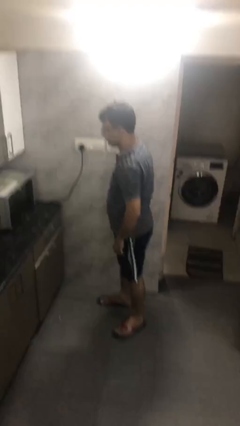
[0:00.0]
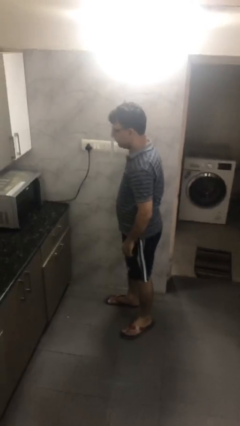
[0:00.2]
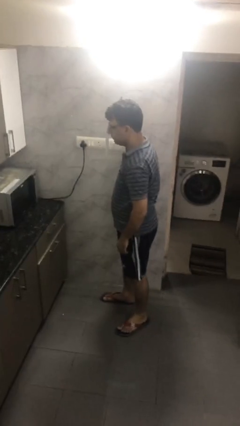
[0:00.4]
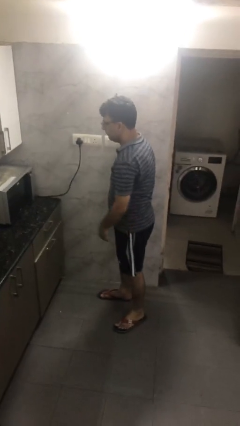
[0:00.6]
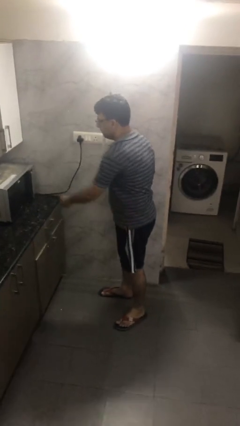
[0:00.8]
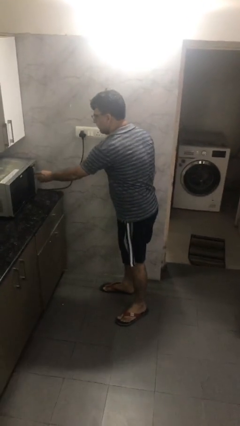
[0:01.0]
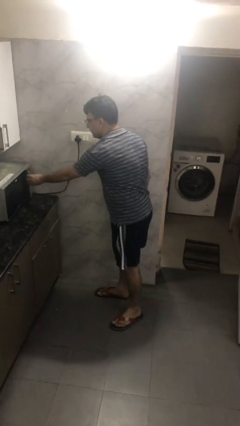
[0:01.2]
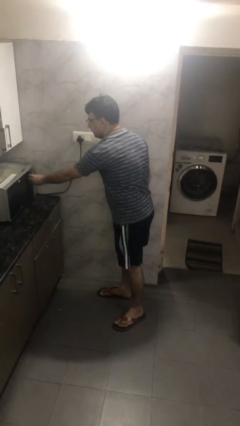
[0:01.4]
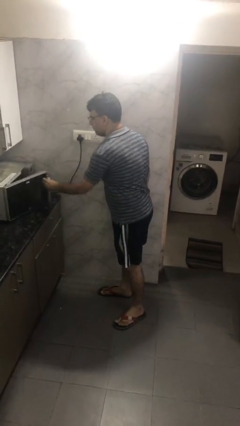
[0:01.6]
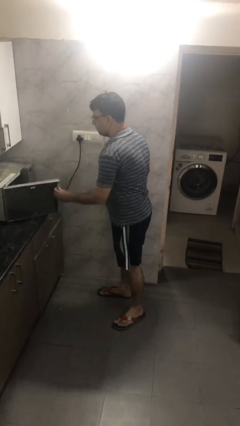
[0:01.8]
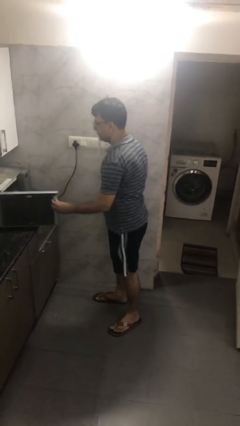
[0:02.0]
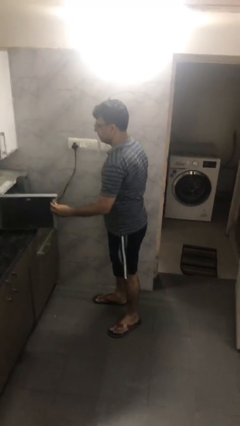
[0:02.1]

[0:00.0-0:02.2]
person opens microwave

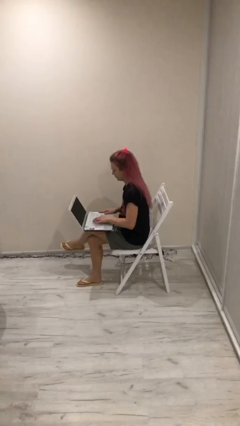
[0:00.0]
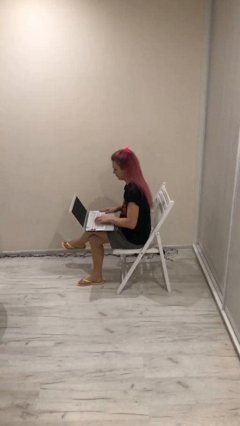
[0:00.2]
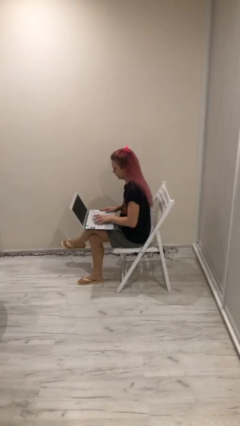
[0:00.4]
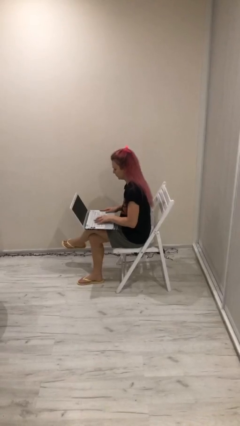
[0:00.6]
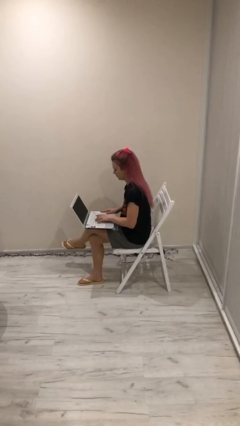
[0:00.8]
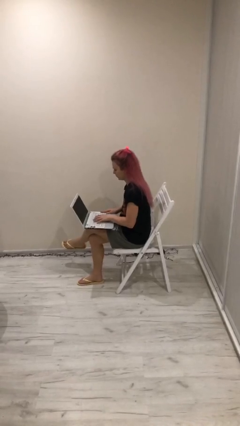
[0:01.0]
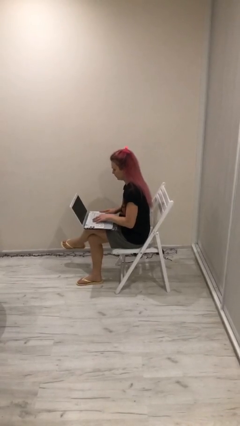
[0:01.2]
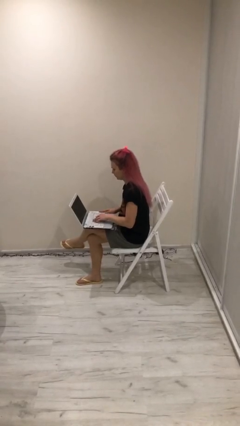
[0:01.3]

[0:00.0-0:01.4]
person interacts with laptop

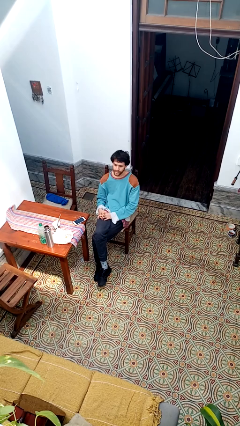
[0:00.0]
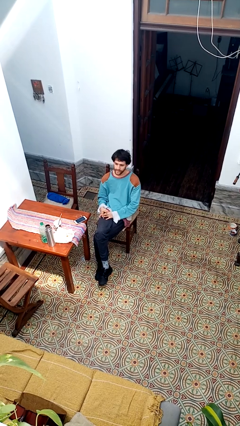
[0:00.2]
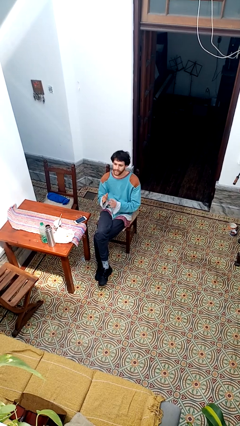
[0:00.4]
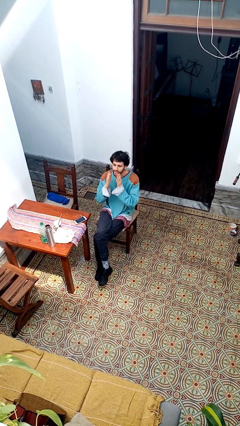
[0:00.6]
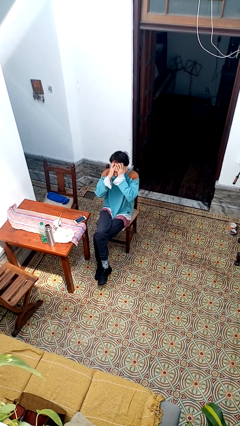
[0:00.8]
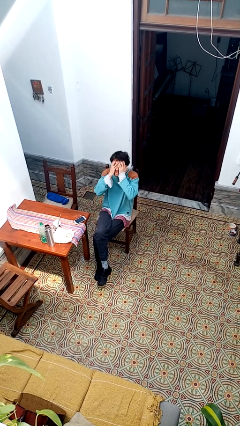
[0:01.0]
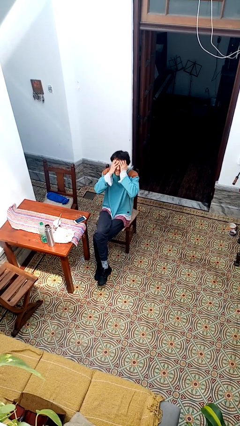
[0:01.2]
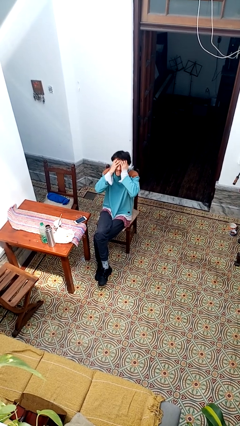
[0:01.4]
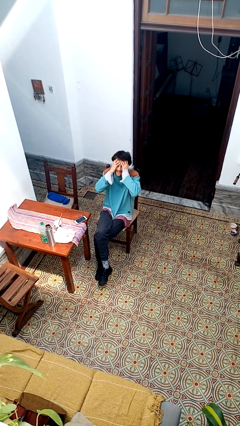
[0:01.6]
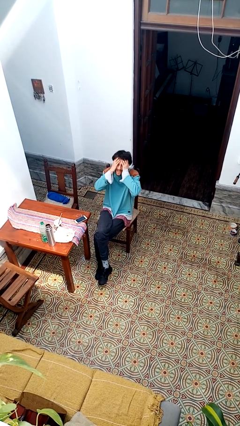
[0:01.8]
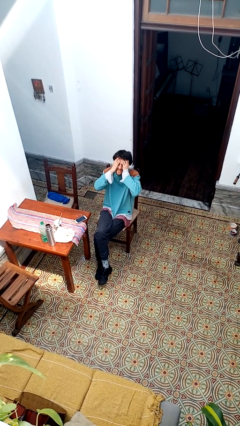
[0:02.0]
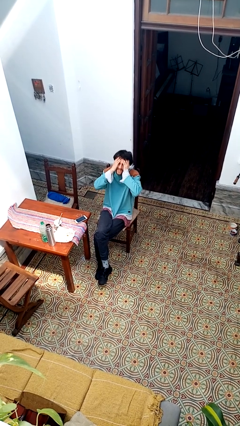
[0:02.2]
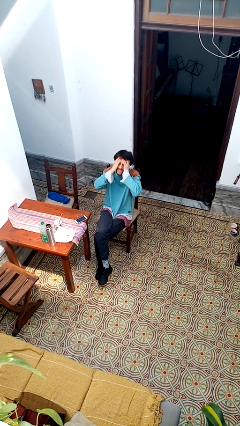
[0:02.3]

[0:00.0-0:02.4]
person covers face with hands

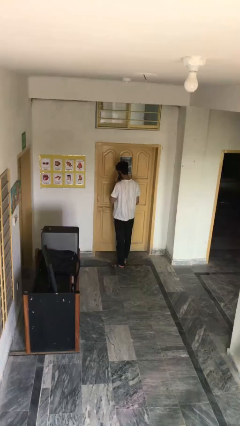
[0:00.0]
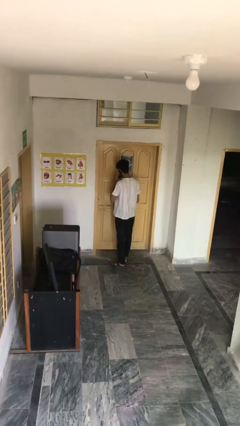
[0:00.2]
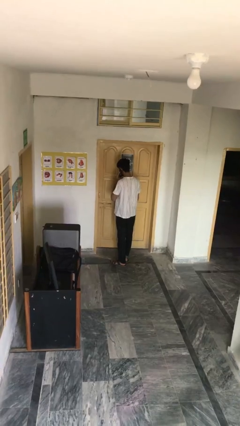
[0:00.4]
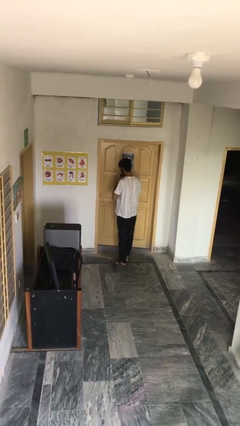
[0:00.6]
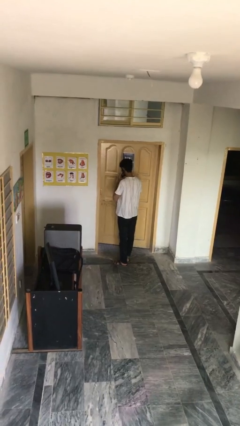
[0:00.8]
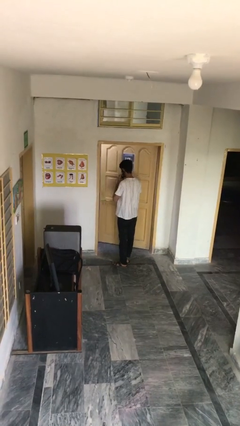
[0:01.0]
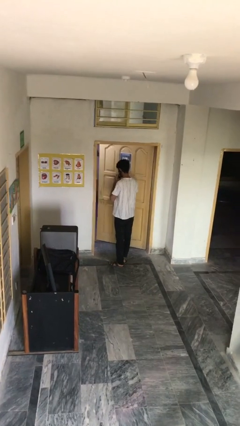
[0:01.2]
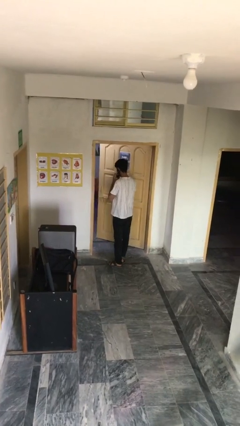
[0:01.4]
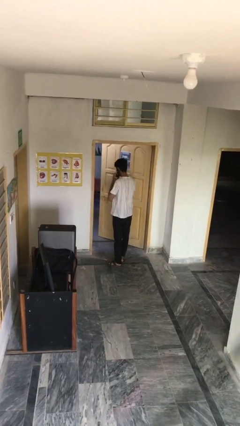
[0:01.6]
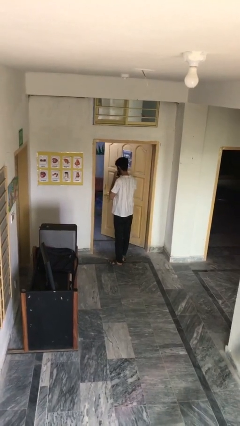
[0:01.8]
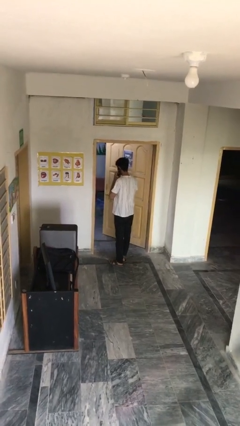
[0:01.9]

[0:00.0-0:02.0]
person opens facility door

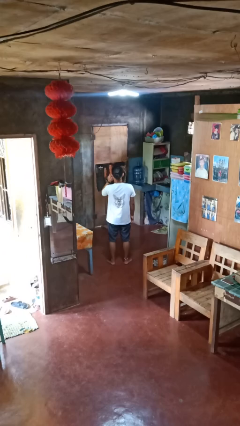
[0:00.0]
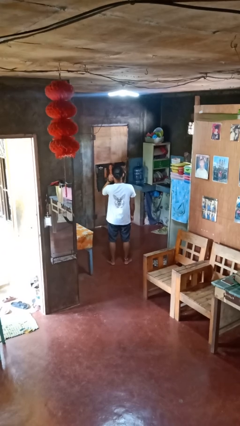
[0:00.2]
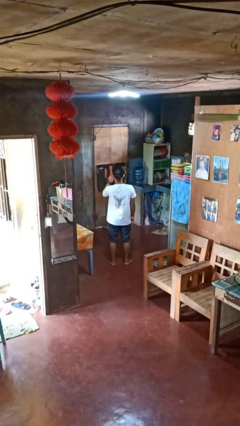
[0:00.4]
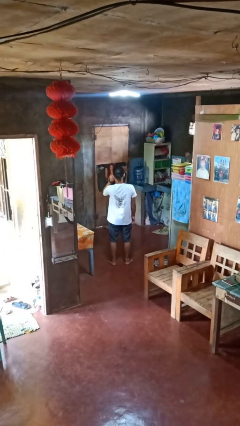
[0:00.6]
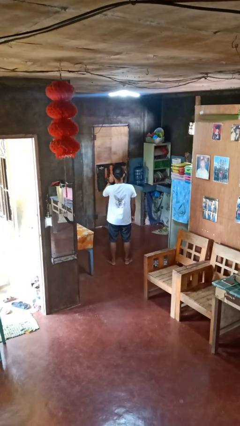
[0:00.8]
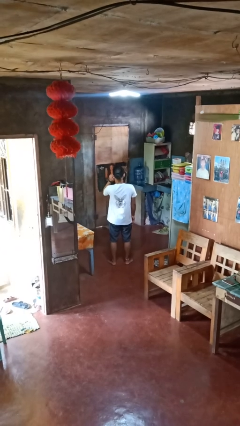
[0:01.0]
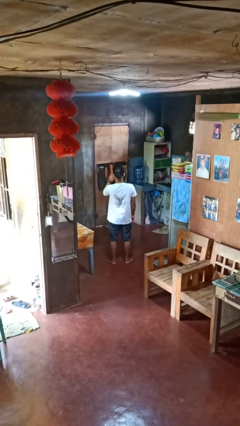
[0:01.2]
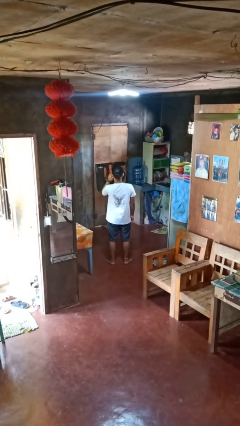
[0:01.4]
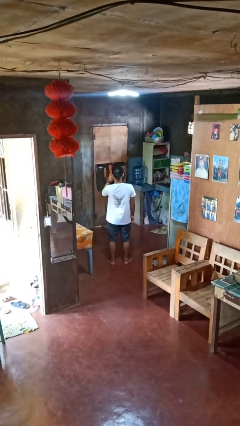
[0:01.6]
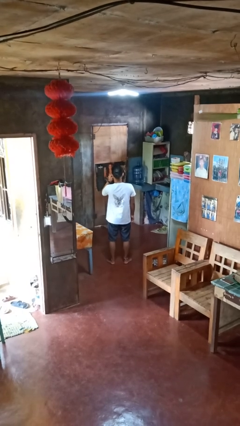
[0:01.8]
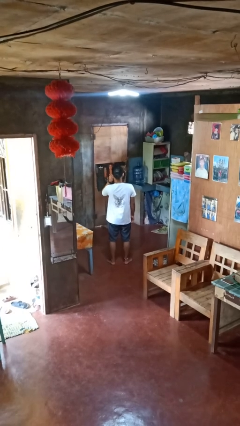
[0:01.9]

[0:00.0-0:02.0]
person touches earlobe

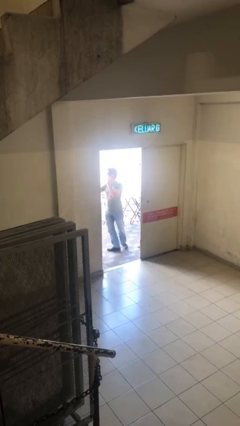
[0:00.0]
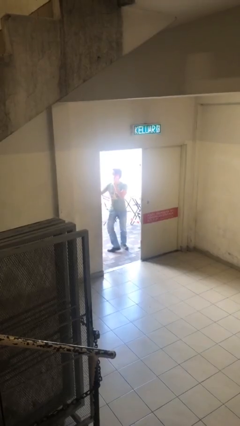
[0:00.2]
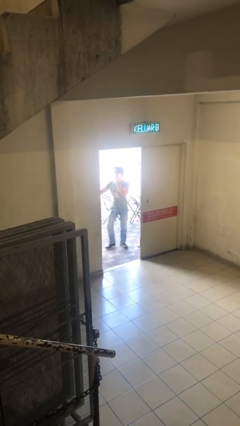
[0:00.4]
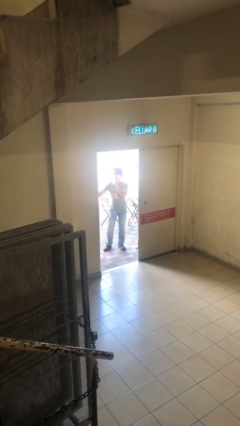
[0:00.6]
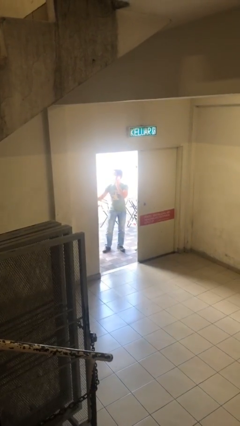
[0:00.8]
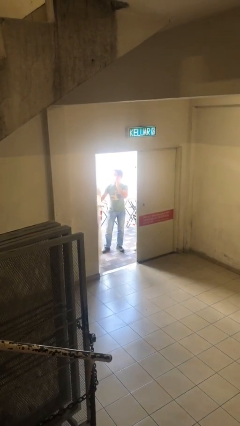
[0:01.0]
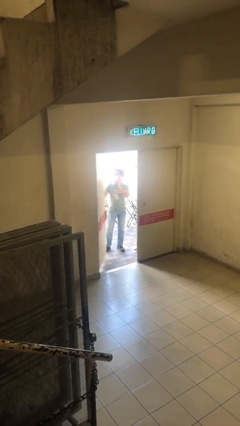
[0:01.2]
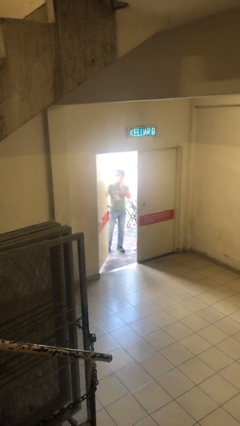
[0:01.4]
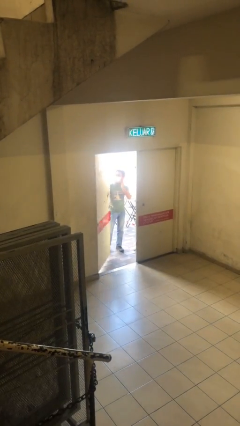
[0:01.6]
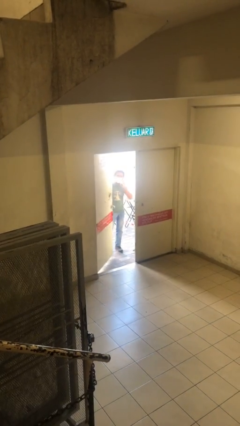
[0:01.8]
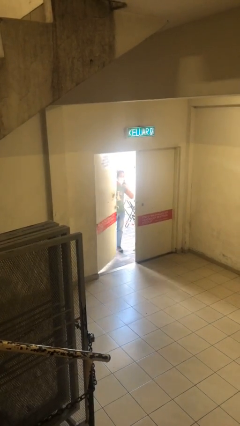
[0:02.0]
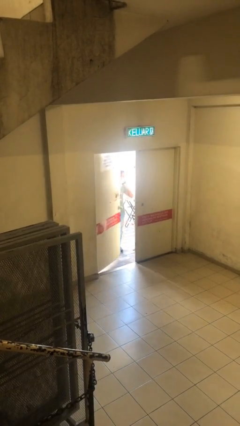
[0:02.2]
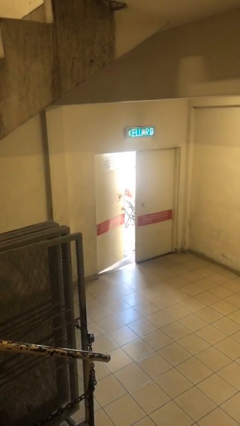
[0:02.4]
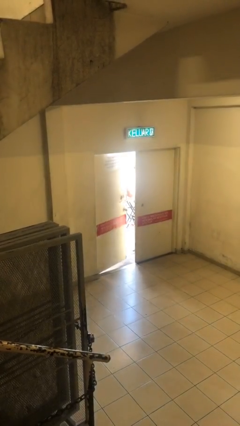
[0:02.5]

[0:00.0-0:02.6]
person closes facility door

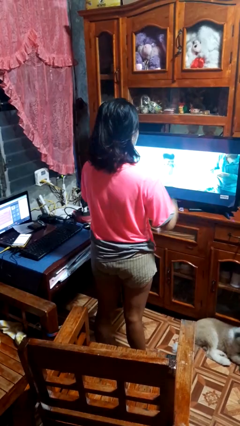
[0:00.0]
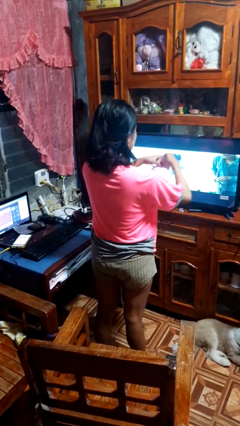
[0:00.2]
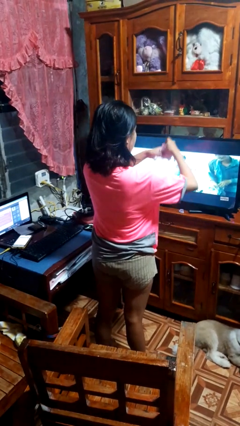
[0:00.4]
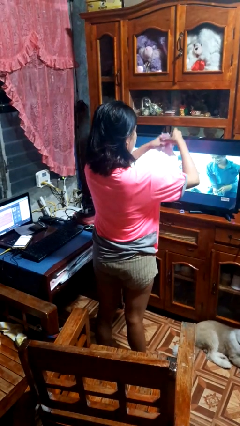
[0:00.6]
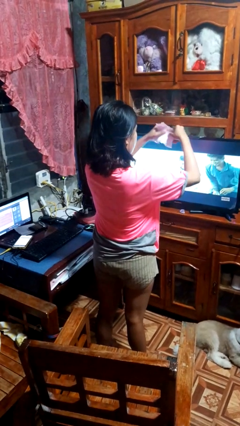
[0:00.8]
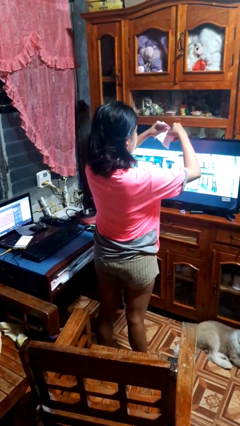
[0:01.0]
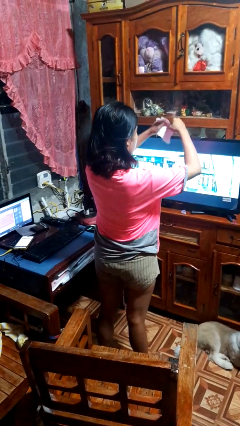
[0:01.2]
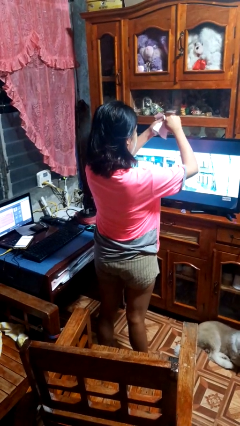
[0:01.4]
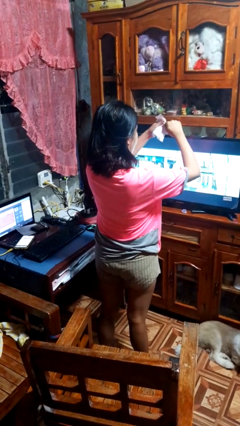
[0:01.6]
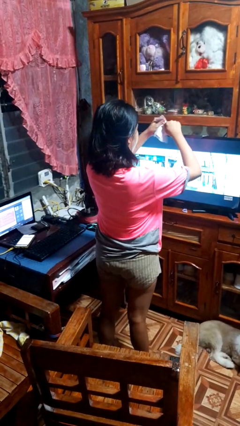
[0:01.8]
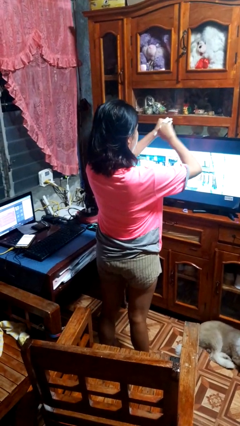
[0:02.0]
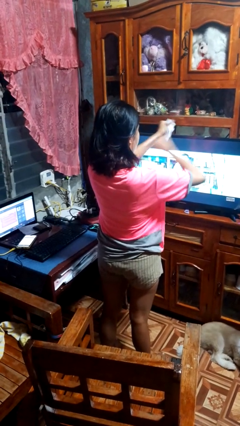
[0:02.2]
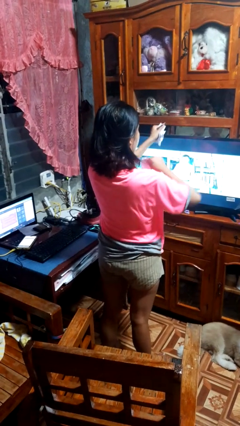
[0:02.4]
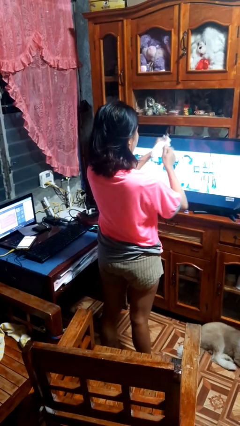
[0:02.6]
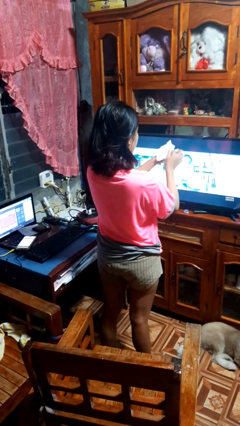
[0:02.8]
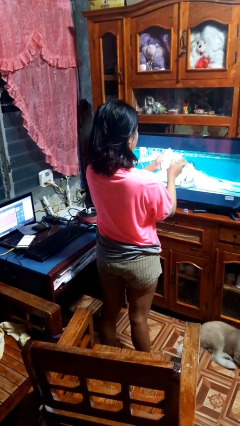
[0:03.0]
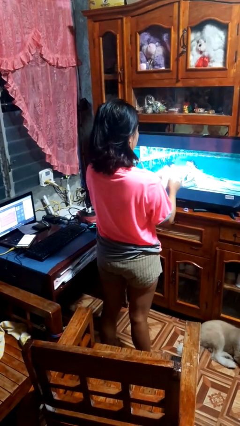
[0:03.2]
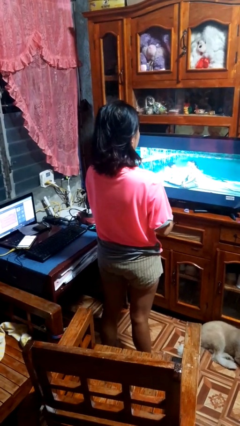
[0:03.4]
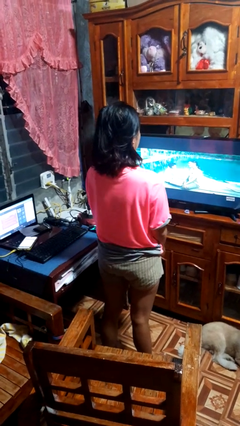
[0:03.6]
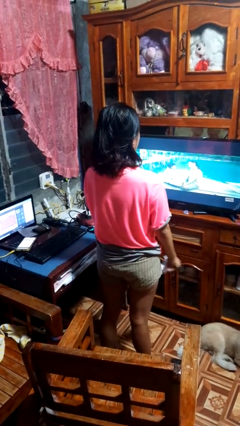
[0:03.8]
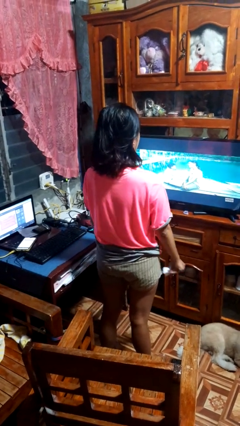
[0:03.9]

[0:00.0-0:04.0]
person tears paper
